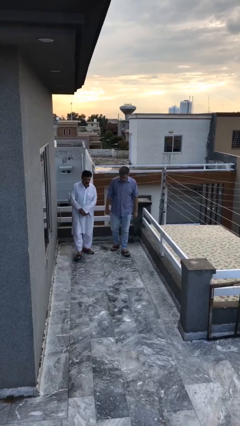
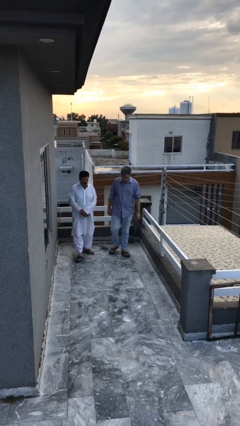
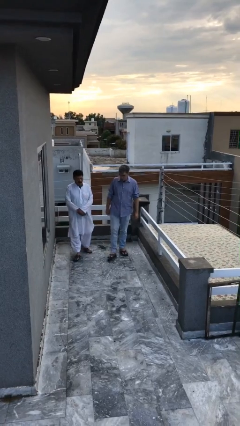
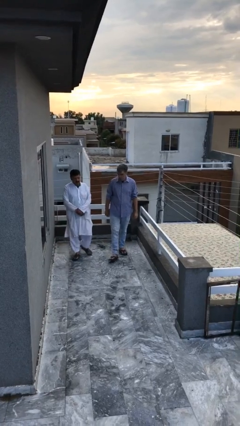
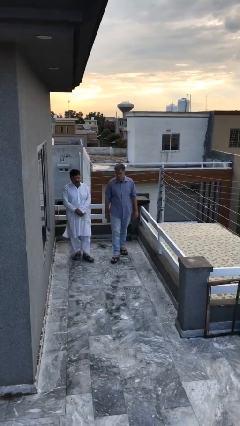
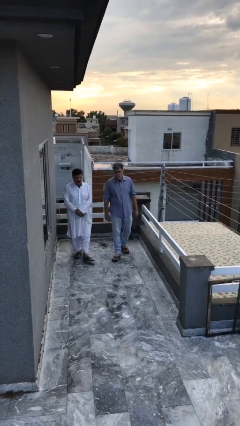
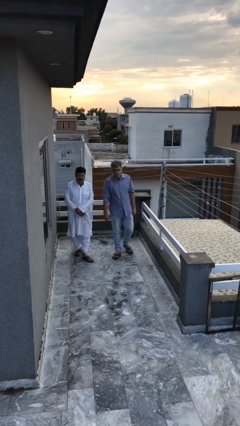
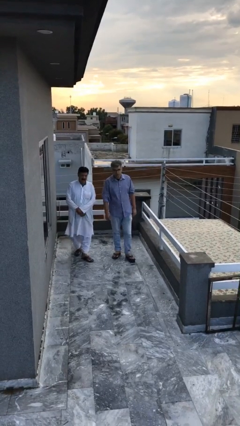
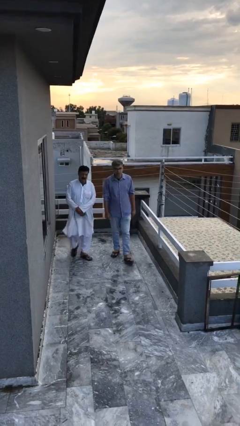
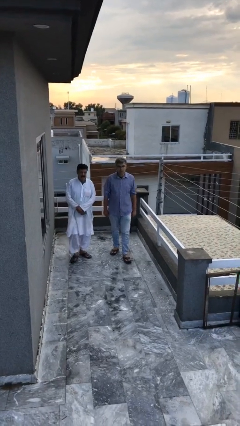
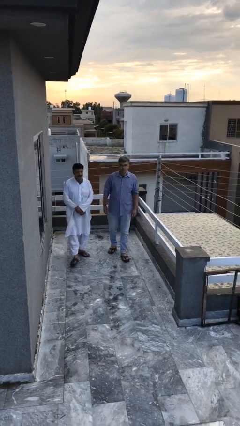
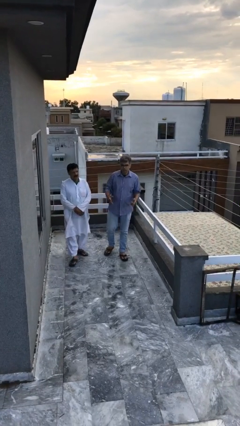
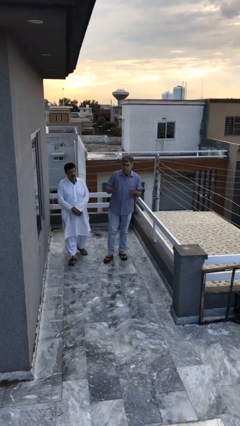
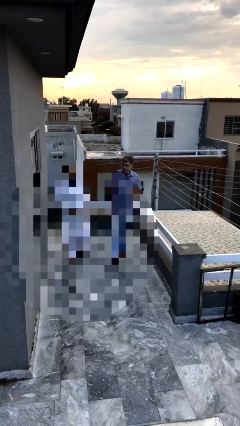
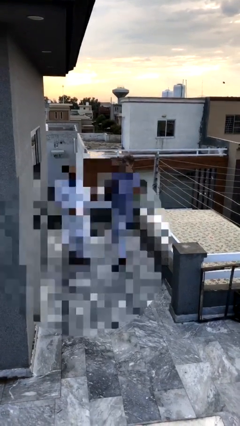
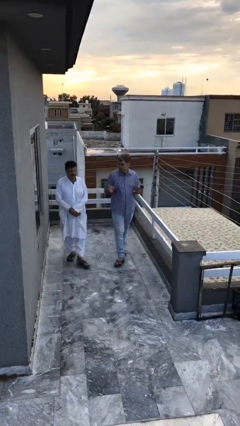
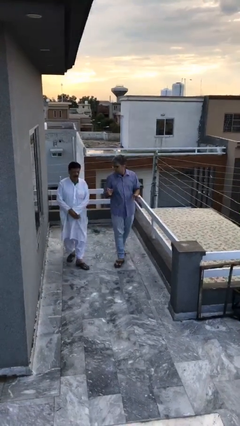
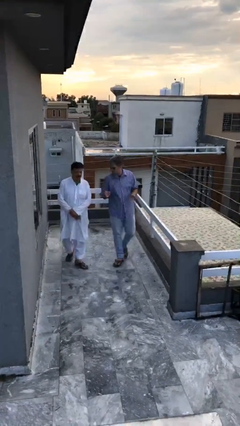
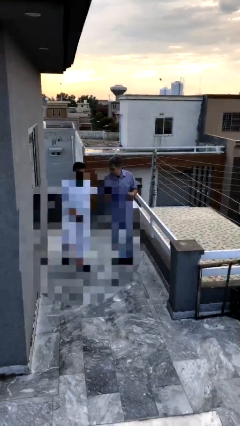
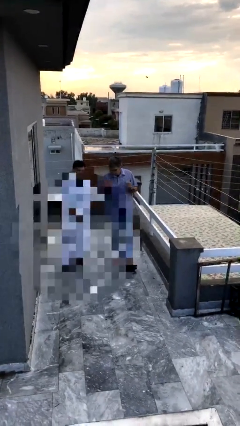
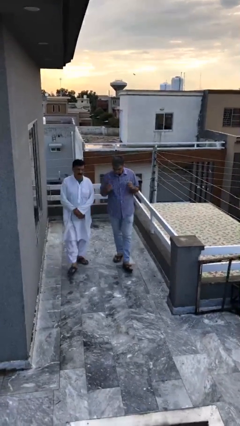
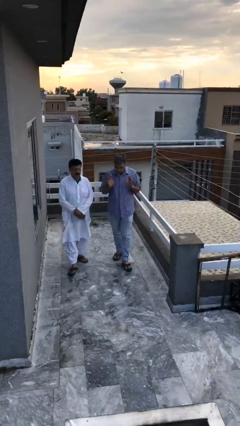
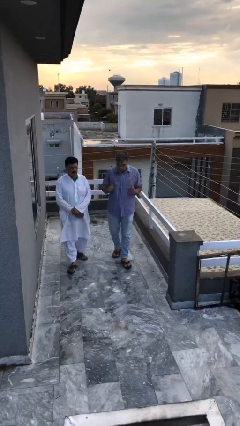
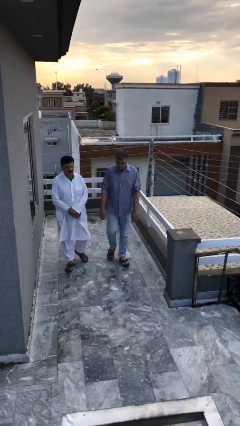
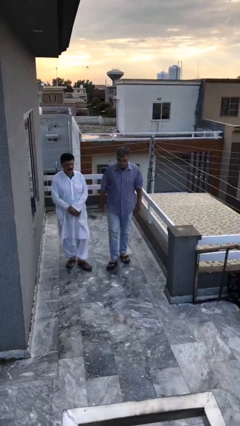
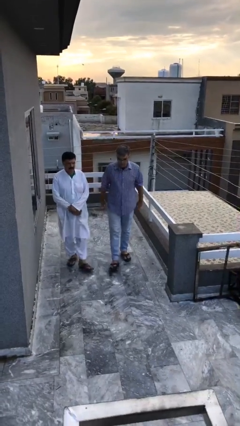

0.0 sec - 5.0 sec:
person talks to person

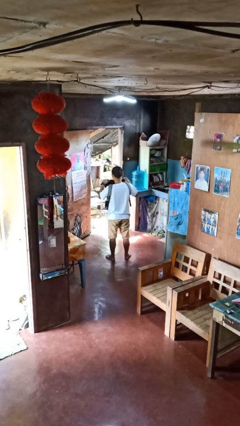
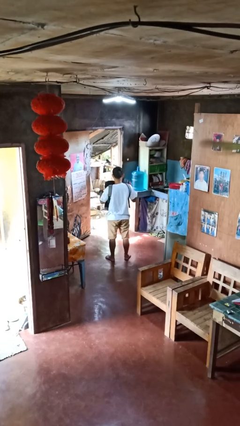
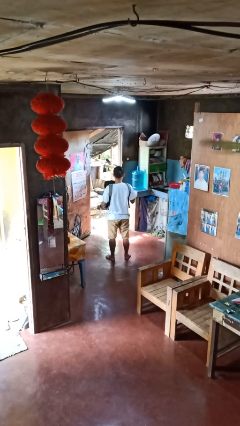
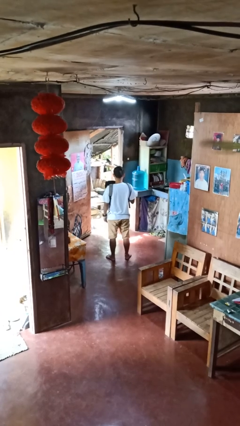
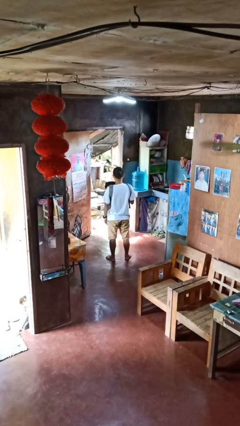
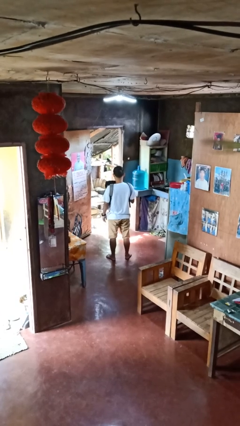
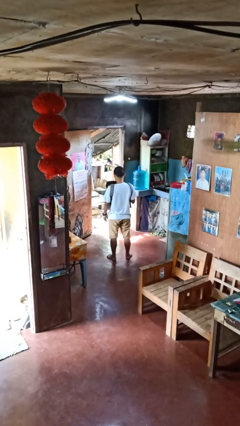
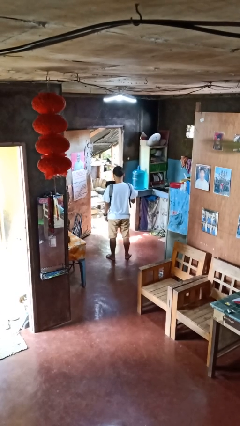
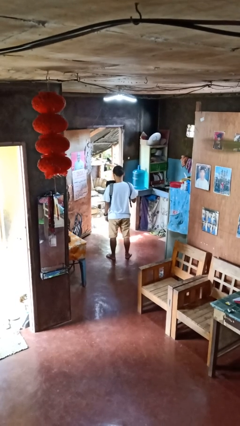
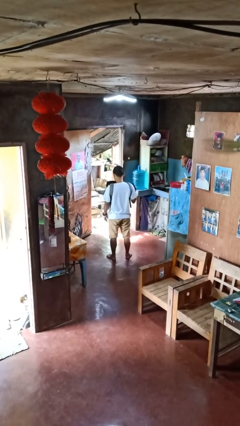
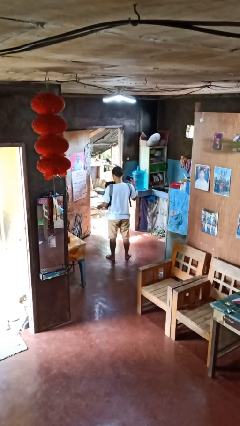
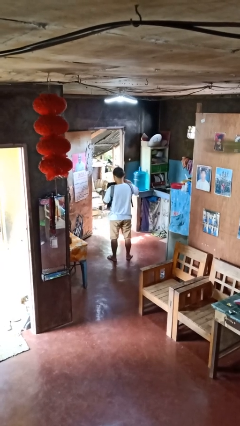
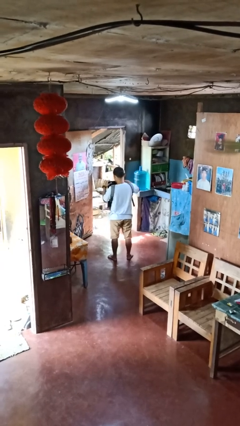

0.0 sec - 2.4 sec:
person takes object from backpack

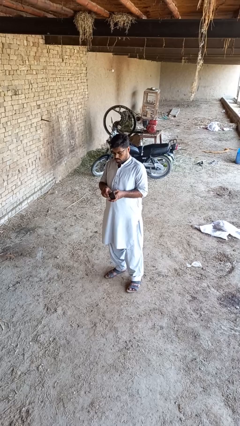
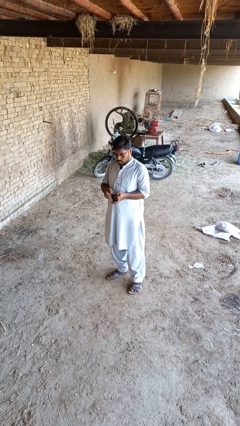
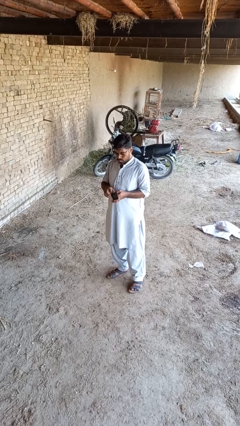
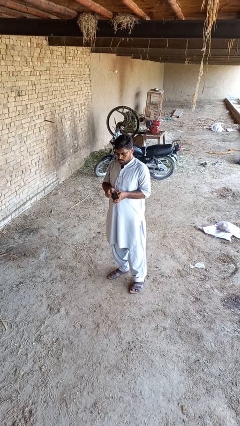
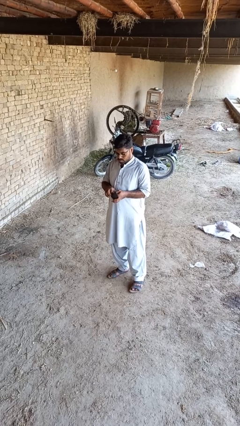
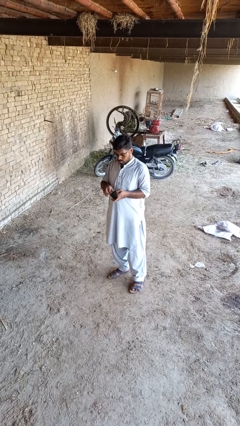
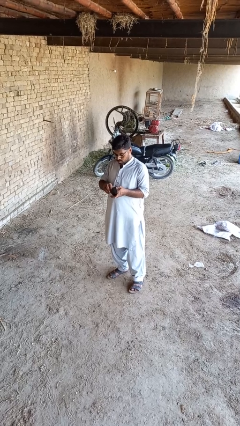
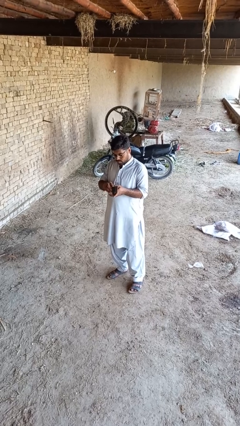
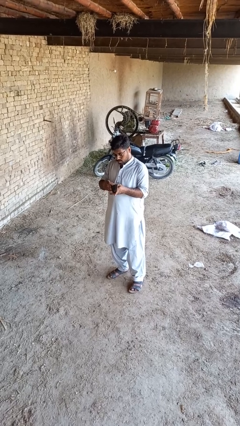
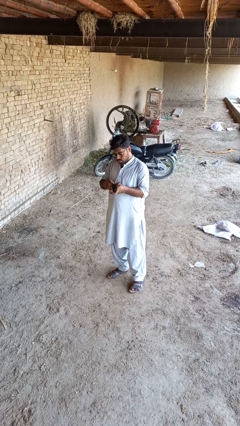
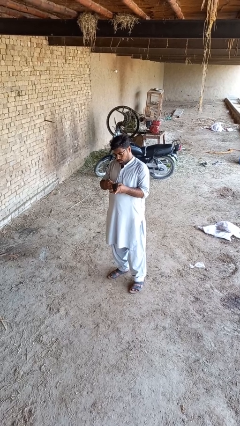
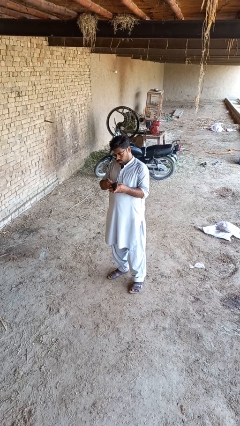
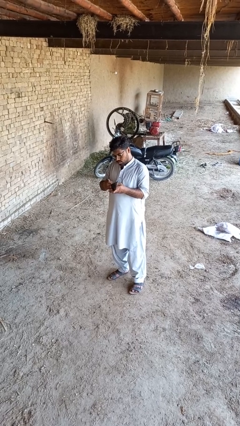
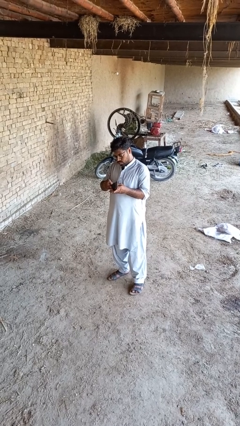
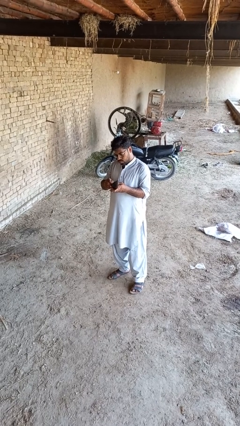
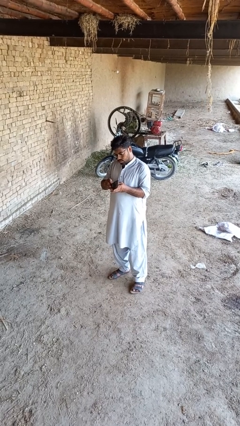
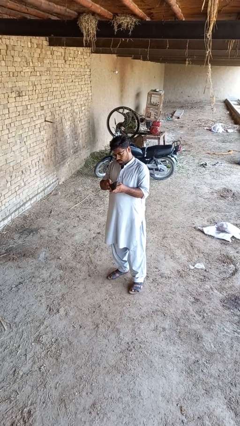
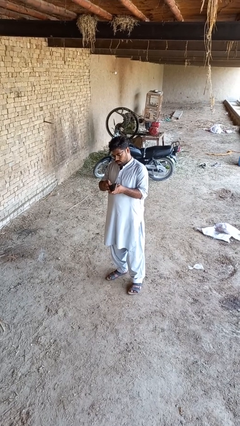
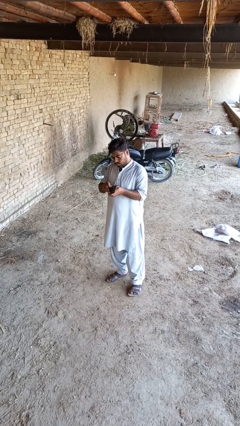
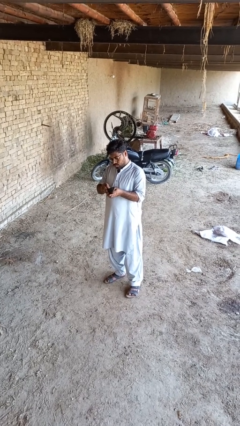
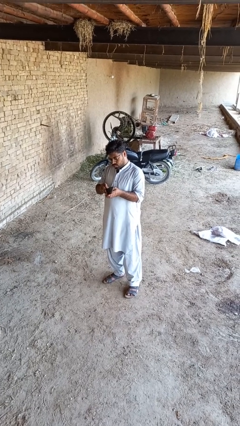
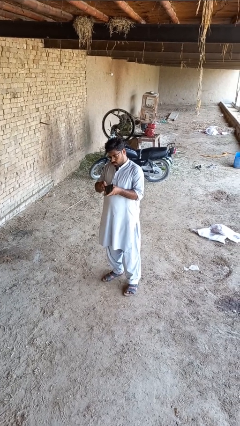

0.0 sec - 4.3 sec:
person searches in purse

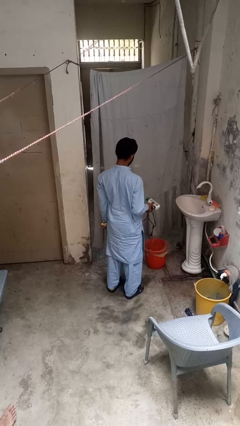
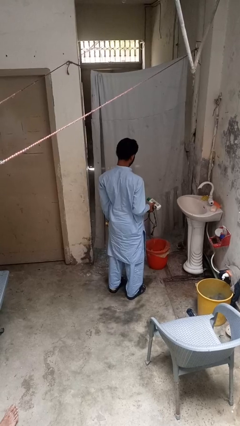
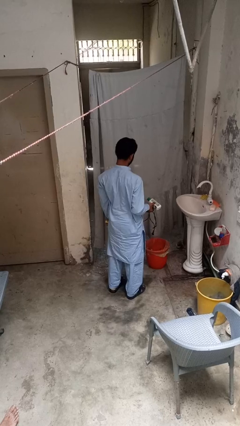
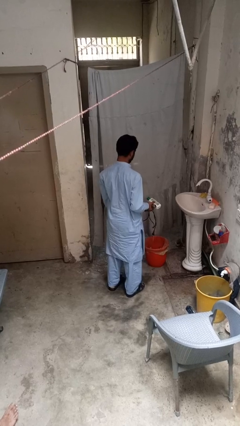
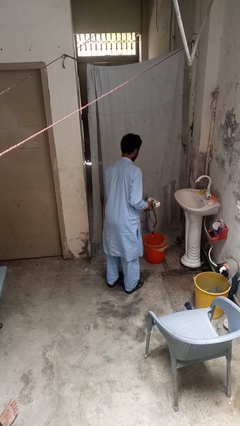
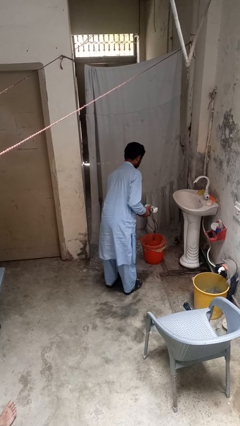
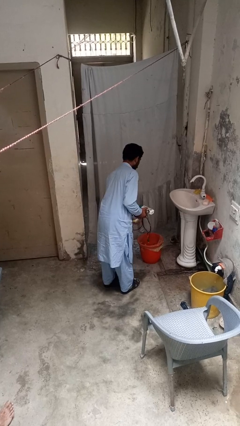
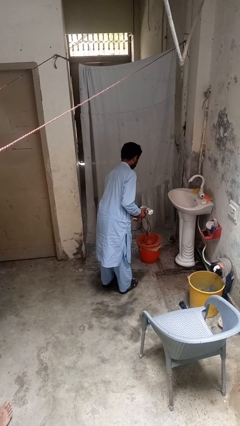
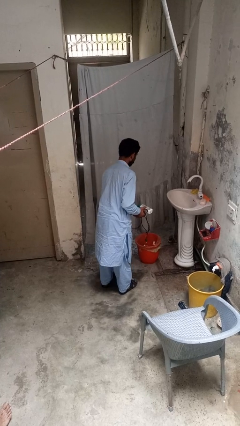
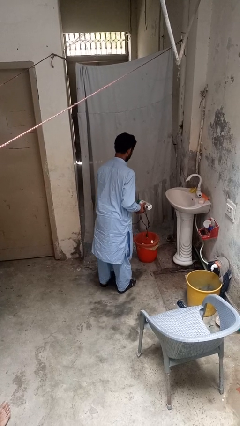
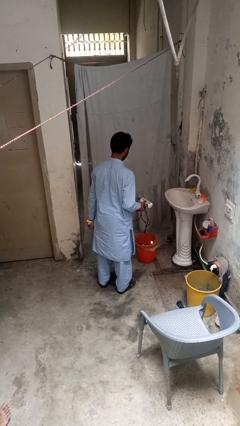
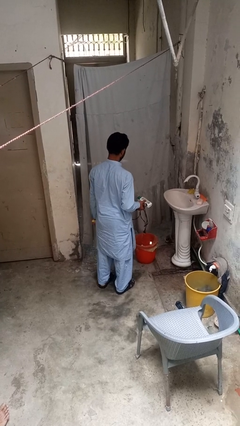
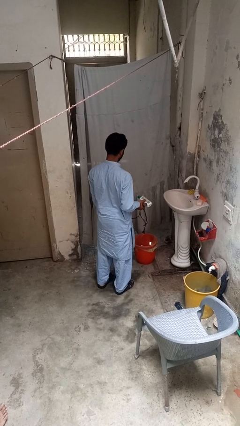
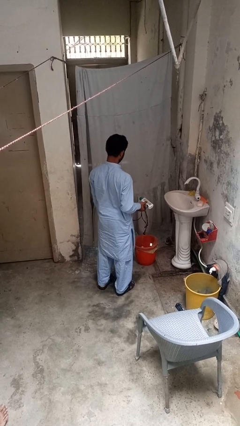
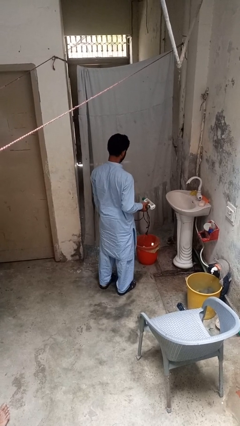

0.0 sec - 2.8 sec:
person discards trash

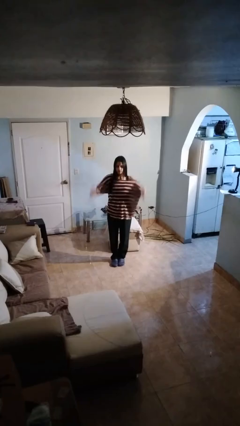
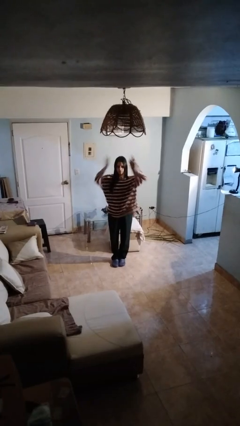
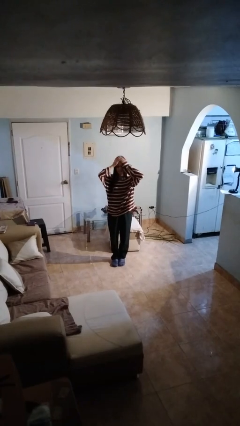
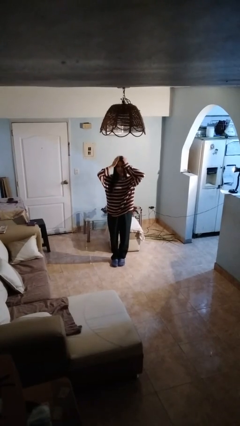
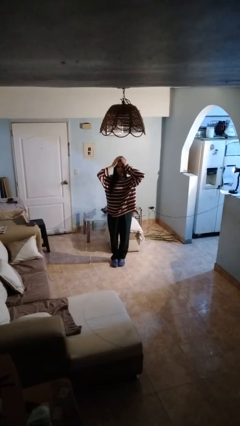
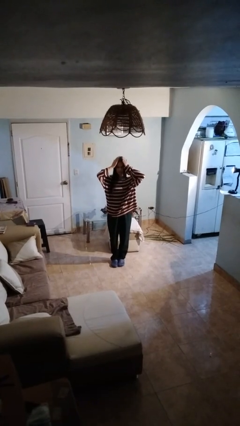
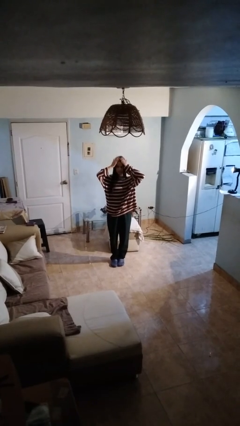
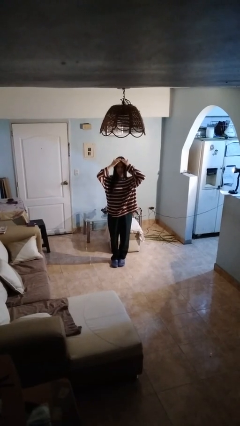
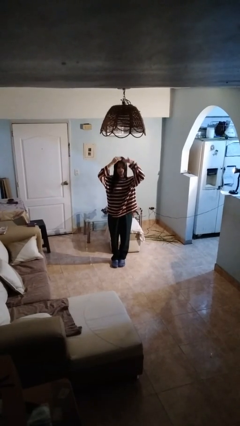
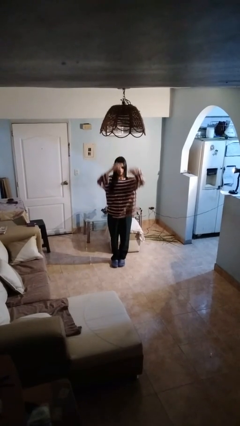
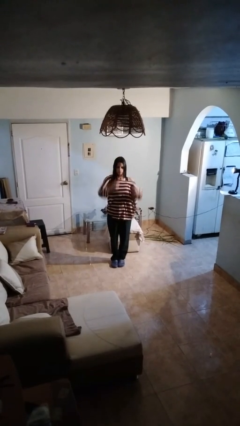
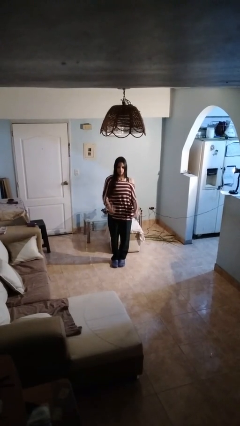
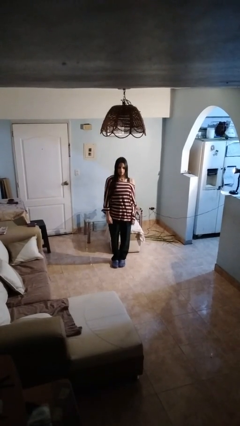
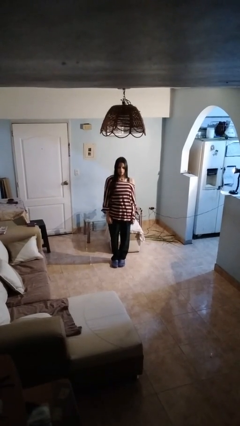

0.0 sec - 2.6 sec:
person pats head

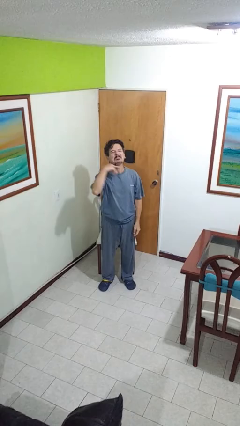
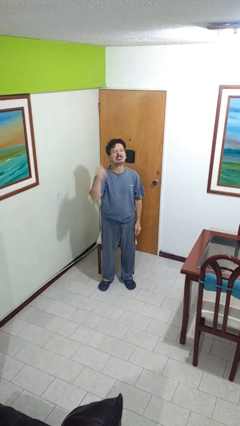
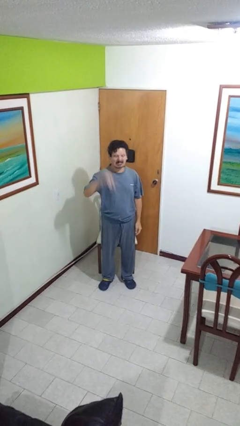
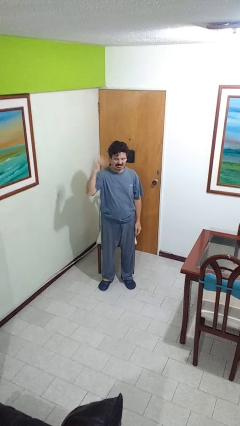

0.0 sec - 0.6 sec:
person gestures cut
